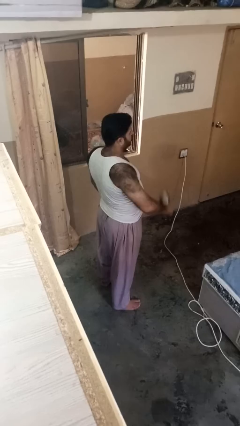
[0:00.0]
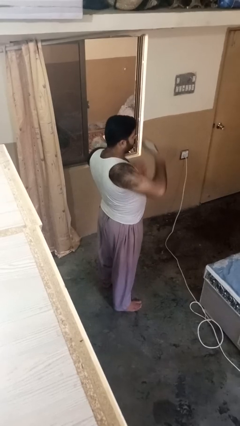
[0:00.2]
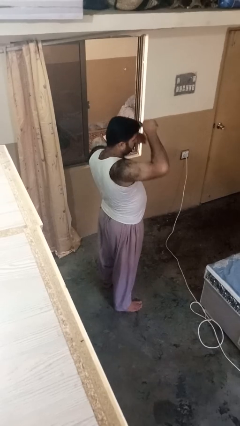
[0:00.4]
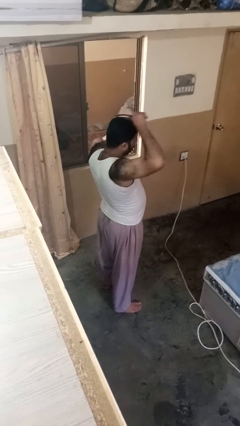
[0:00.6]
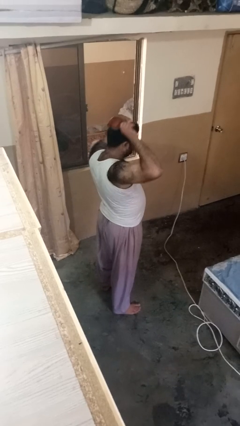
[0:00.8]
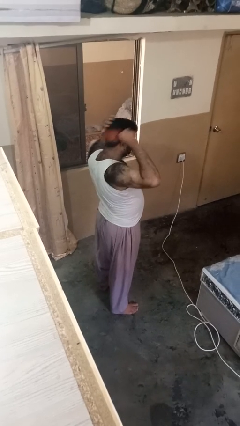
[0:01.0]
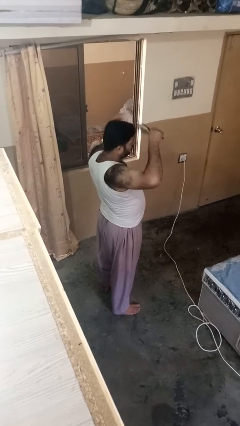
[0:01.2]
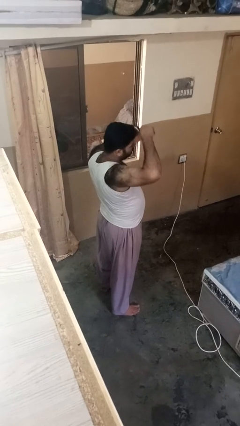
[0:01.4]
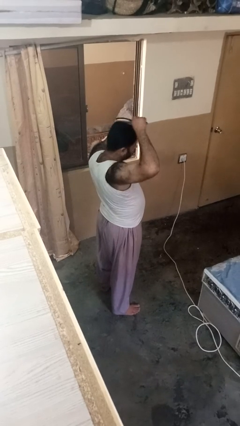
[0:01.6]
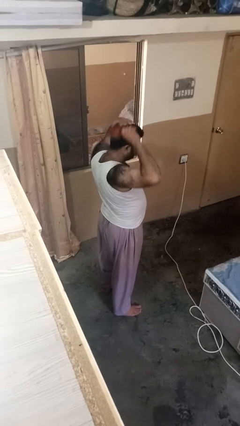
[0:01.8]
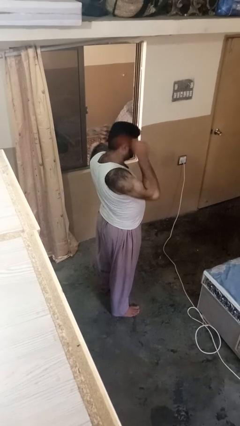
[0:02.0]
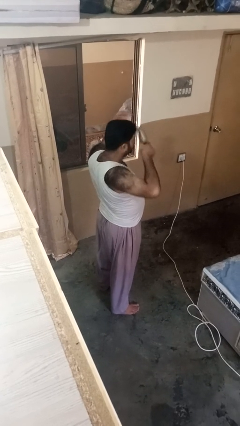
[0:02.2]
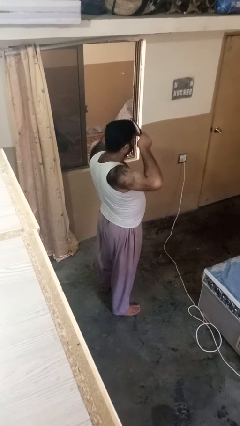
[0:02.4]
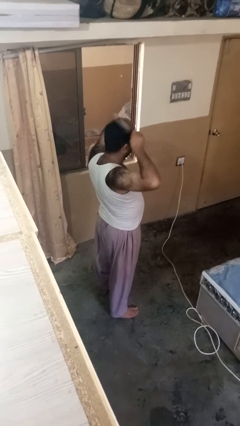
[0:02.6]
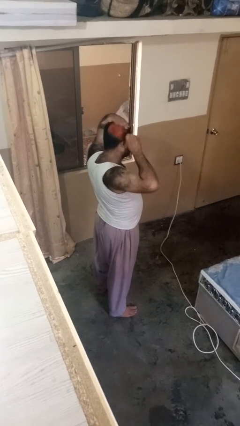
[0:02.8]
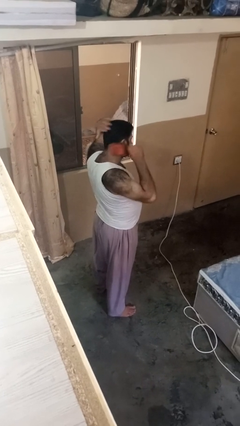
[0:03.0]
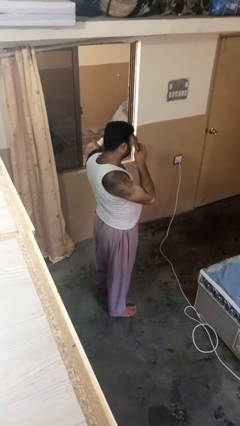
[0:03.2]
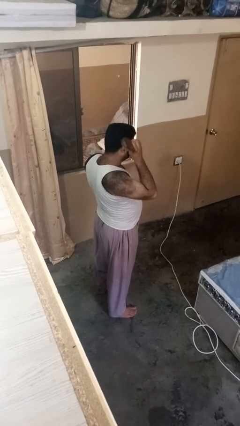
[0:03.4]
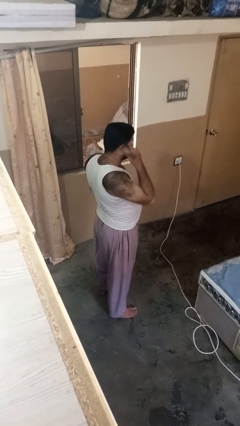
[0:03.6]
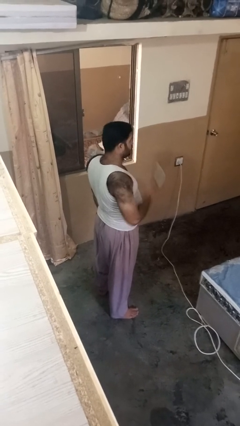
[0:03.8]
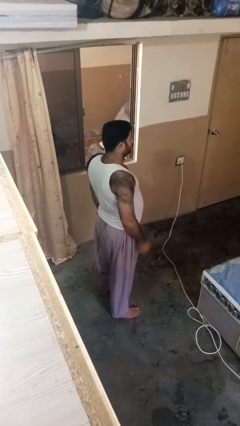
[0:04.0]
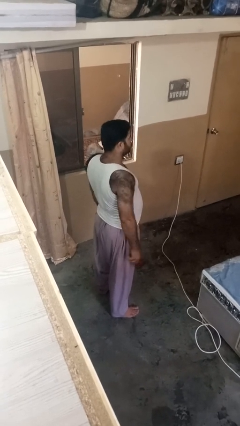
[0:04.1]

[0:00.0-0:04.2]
person brushes hair

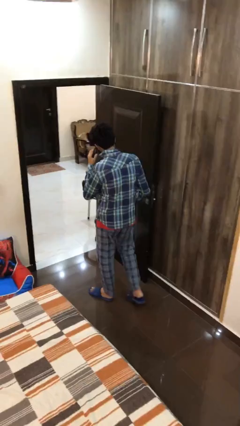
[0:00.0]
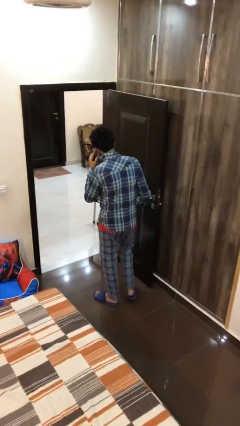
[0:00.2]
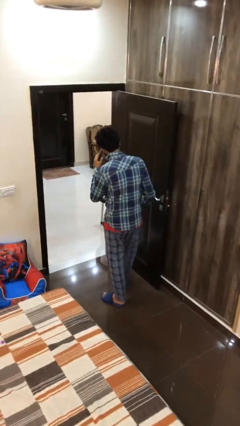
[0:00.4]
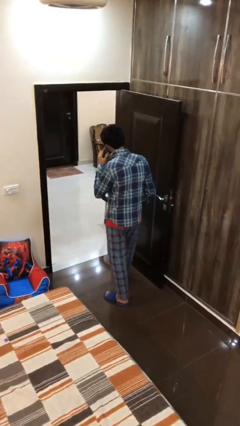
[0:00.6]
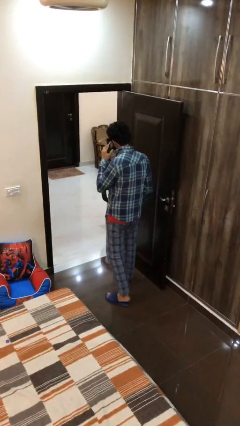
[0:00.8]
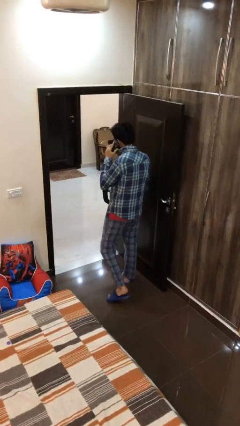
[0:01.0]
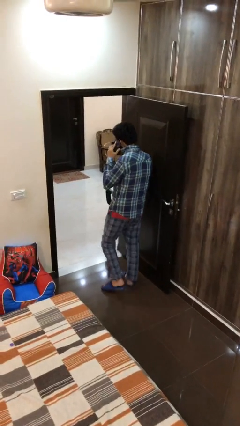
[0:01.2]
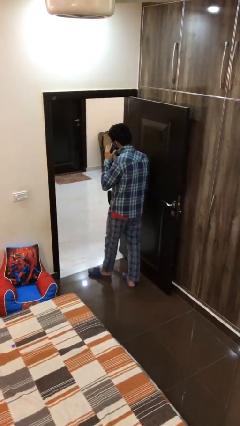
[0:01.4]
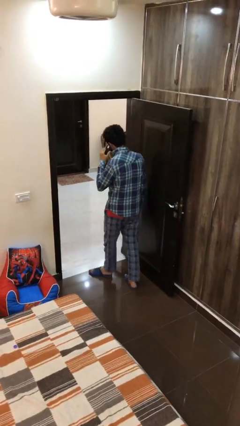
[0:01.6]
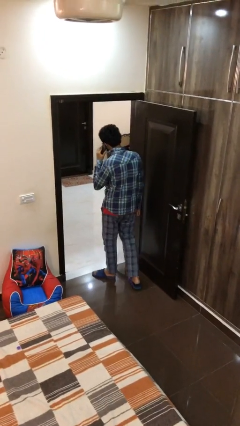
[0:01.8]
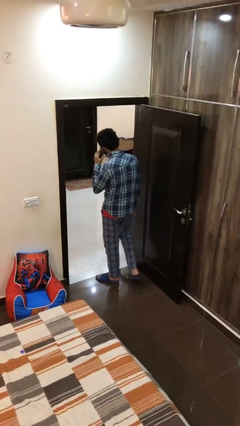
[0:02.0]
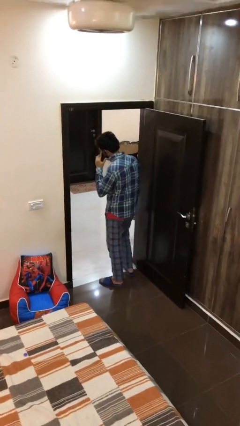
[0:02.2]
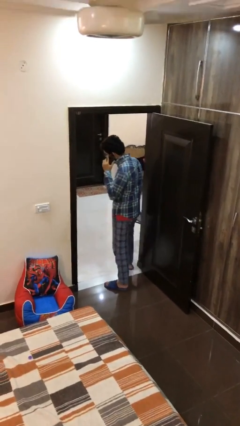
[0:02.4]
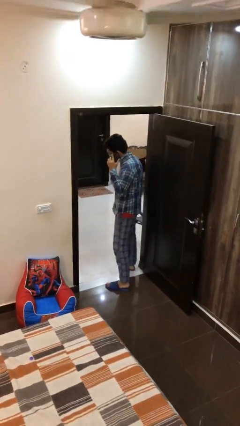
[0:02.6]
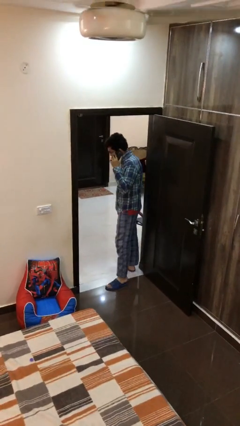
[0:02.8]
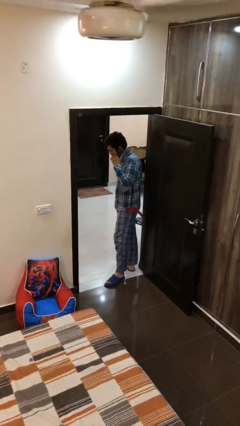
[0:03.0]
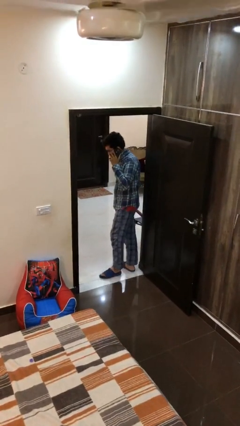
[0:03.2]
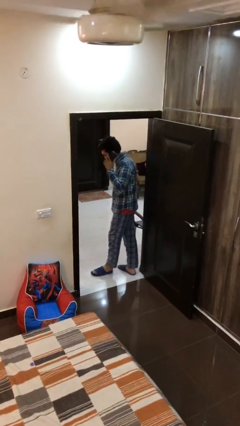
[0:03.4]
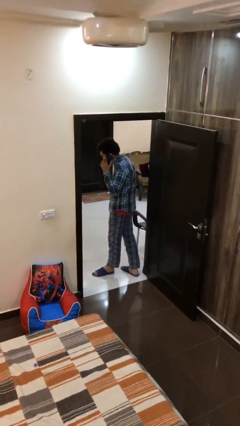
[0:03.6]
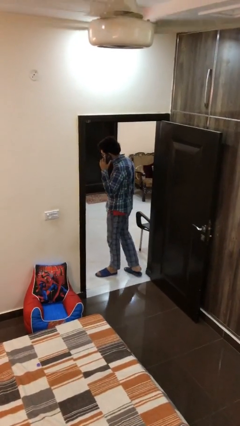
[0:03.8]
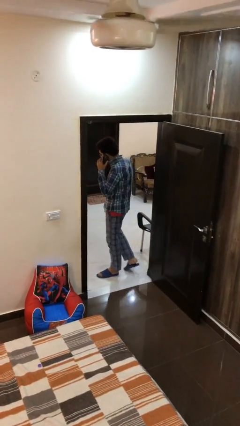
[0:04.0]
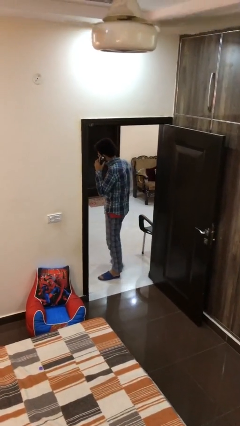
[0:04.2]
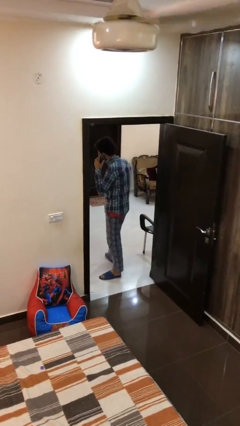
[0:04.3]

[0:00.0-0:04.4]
person exits scene through structure

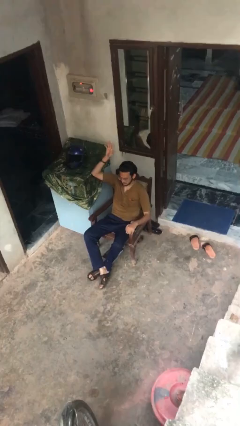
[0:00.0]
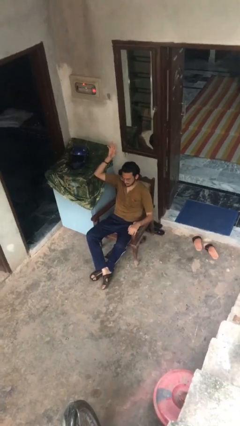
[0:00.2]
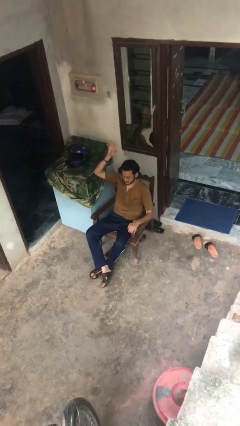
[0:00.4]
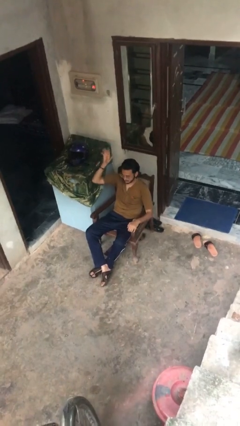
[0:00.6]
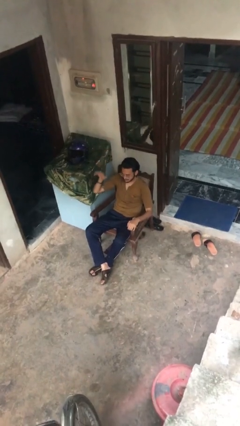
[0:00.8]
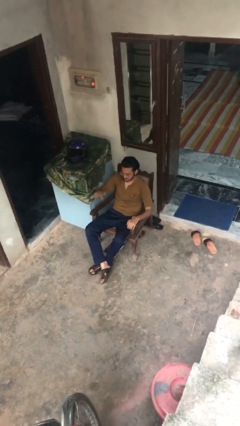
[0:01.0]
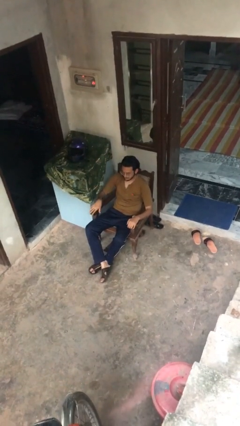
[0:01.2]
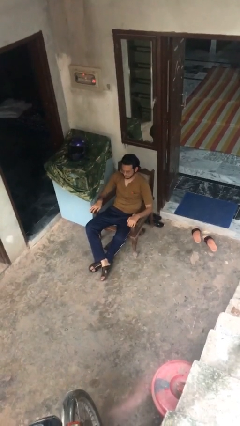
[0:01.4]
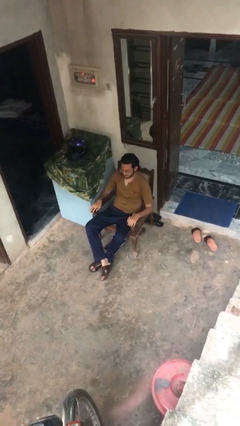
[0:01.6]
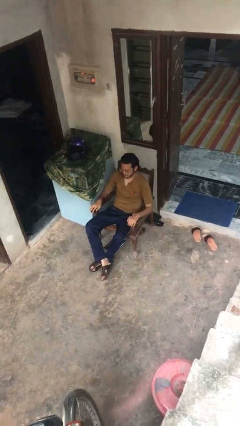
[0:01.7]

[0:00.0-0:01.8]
person gestures lower hand

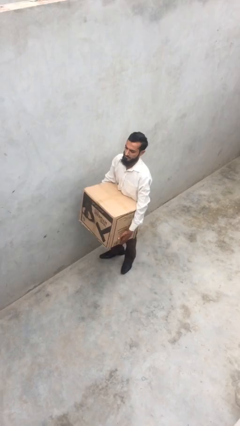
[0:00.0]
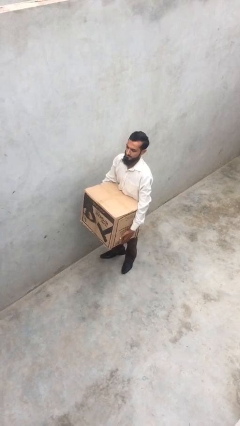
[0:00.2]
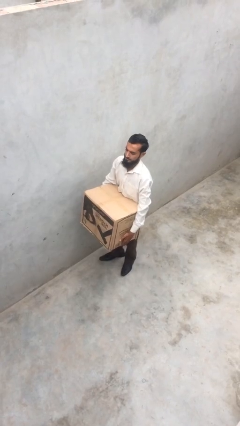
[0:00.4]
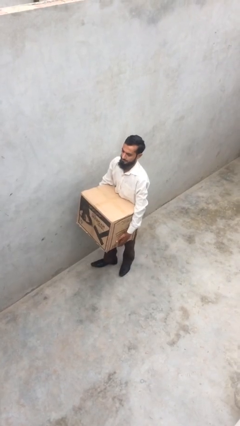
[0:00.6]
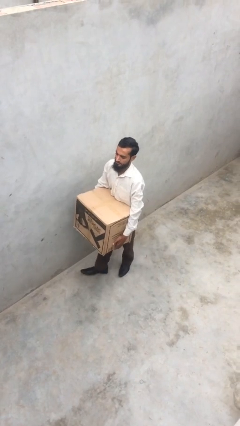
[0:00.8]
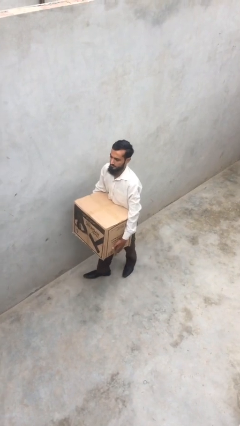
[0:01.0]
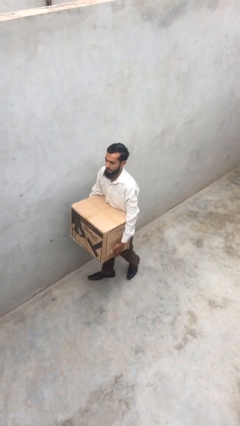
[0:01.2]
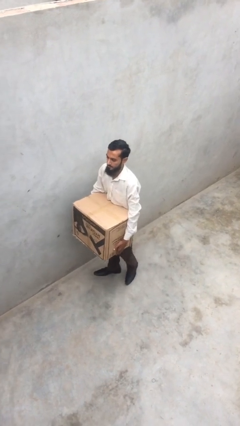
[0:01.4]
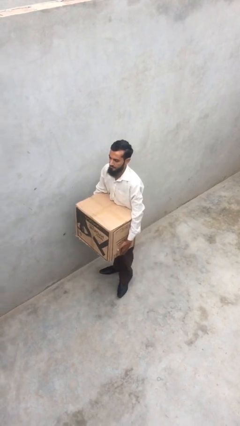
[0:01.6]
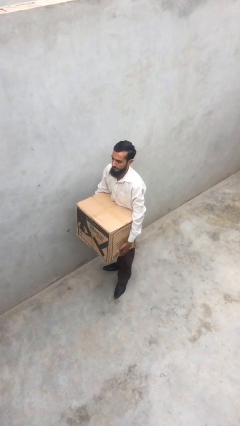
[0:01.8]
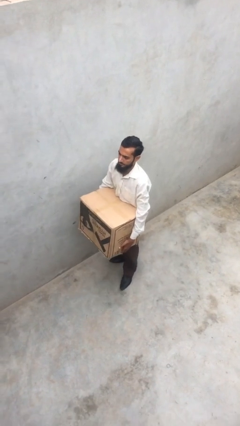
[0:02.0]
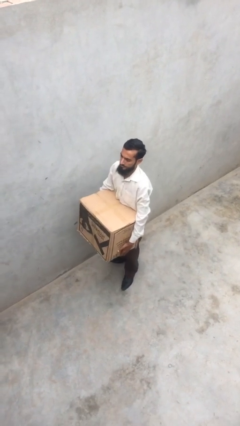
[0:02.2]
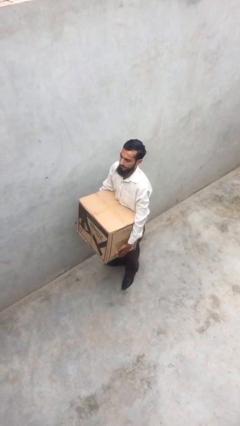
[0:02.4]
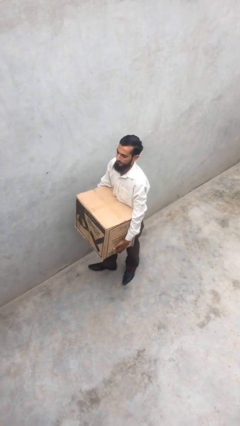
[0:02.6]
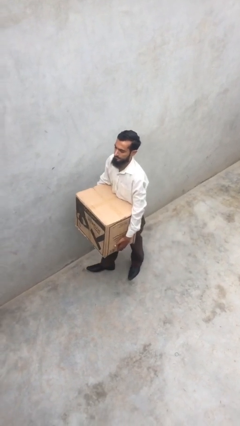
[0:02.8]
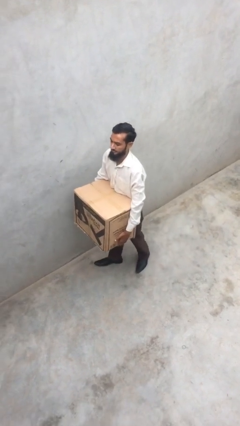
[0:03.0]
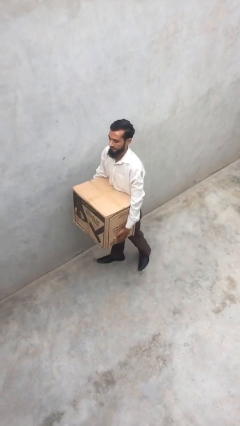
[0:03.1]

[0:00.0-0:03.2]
person carries heavy object

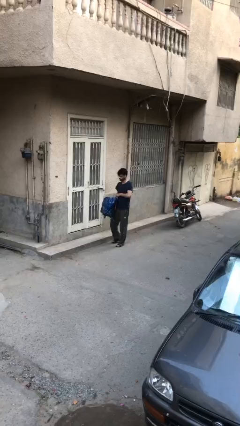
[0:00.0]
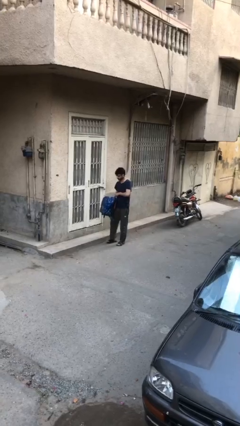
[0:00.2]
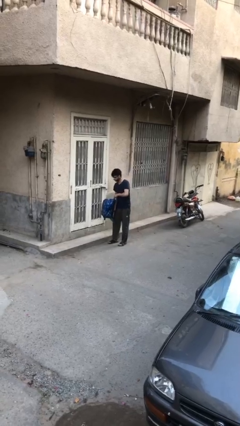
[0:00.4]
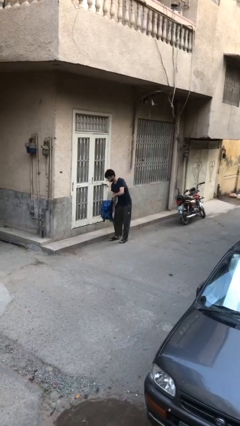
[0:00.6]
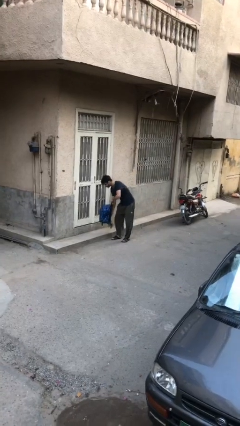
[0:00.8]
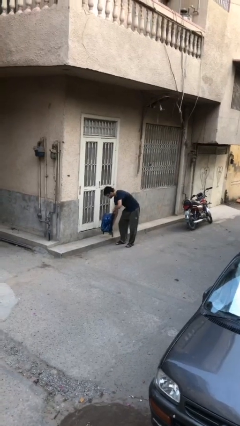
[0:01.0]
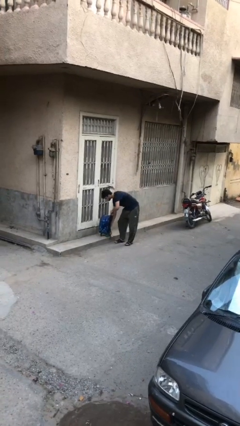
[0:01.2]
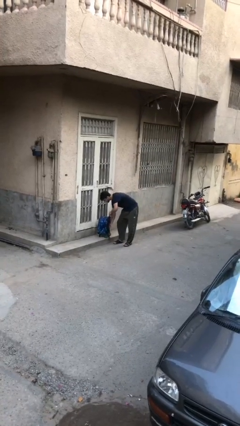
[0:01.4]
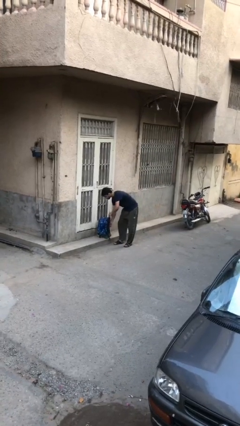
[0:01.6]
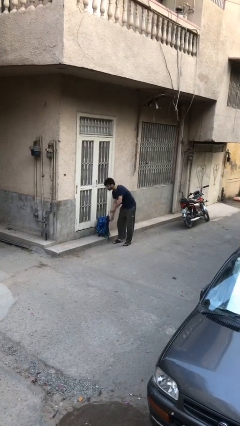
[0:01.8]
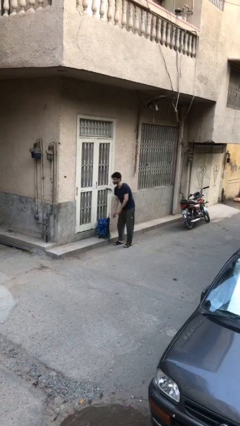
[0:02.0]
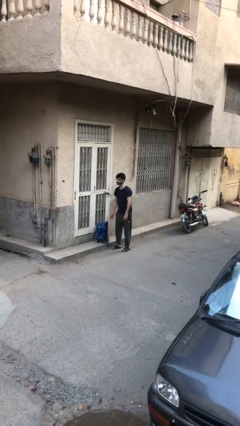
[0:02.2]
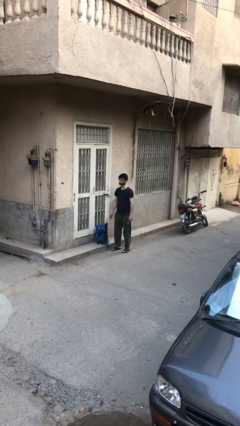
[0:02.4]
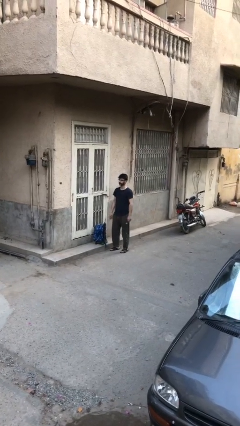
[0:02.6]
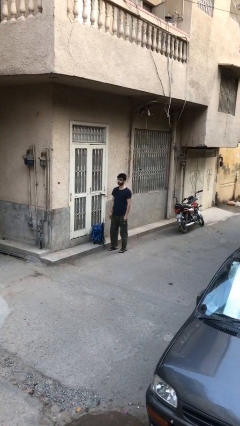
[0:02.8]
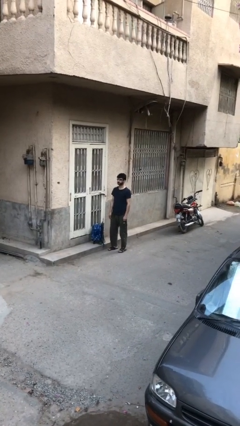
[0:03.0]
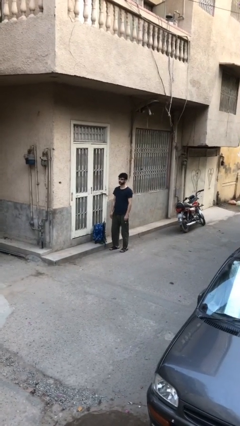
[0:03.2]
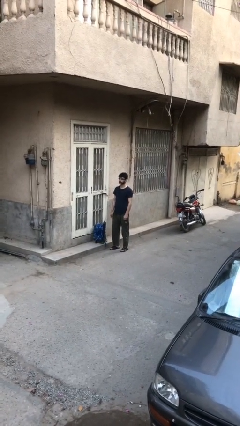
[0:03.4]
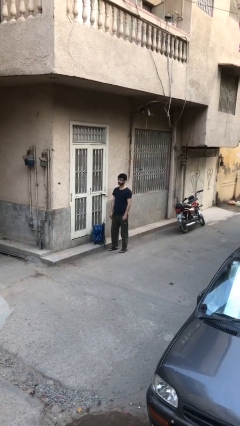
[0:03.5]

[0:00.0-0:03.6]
person puts down object on floor
